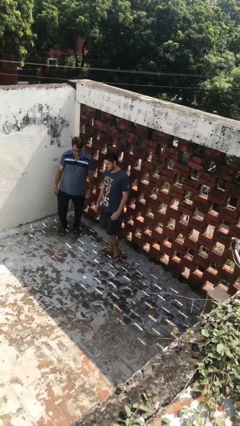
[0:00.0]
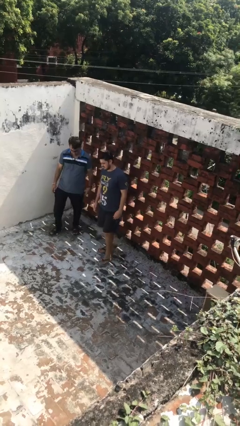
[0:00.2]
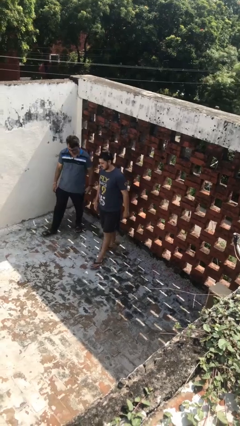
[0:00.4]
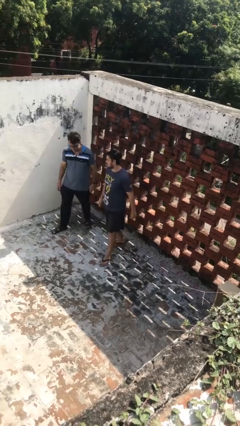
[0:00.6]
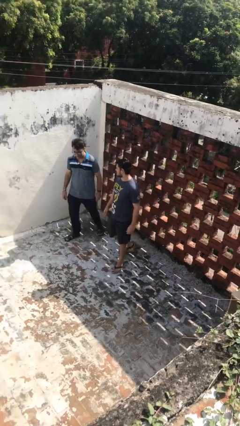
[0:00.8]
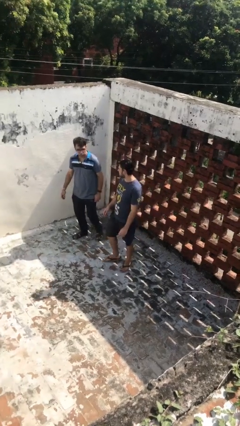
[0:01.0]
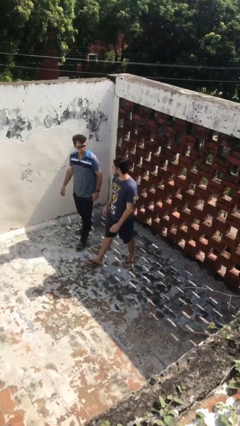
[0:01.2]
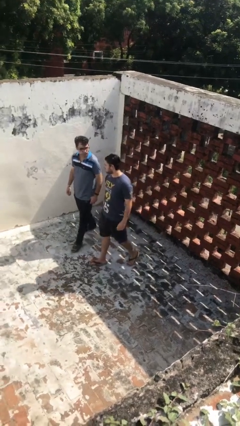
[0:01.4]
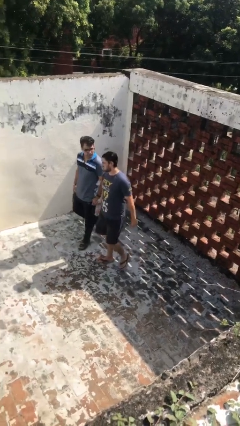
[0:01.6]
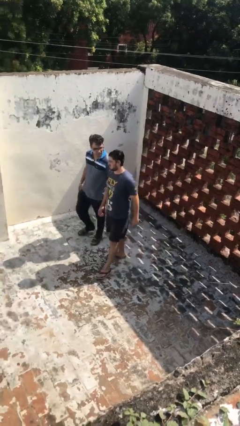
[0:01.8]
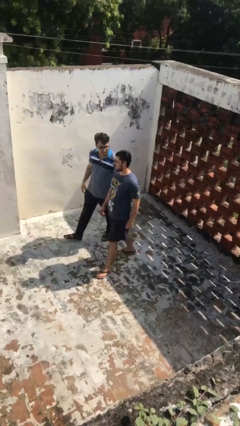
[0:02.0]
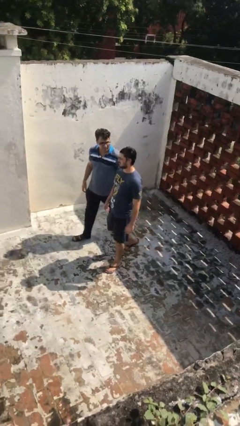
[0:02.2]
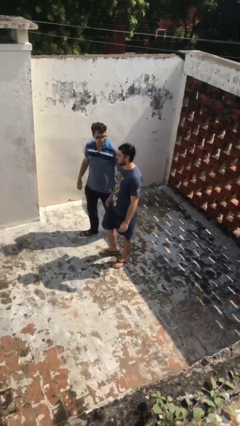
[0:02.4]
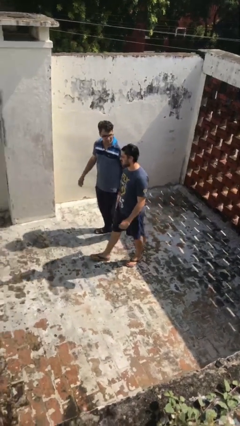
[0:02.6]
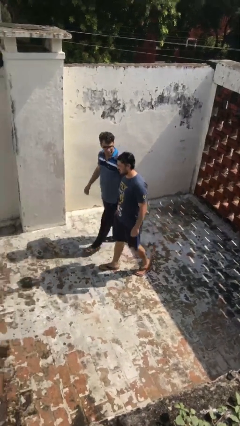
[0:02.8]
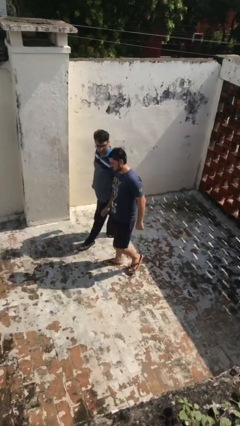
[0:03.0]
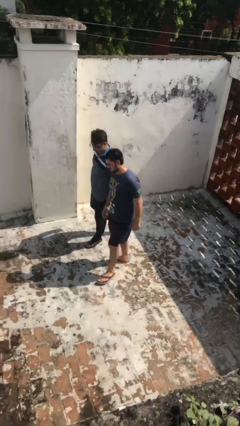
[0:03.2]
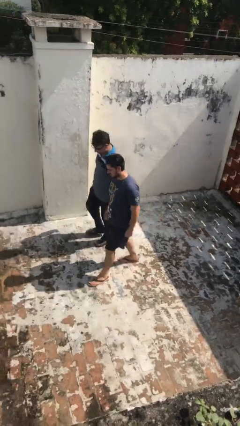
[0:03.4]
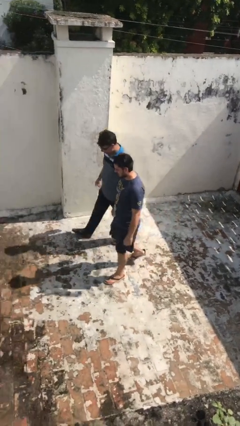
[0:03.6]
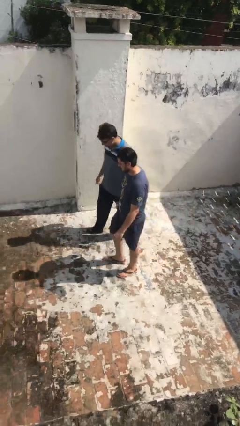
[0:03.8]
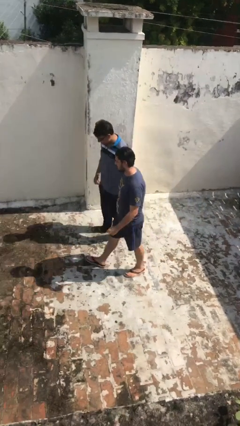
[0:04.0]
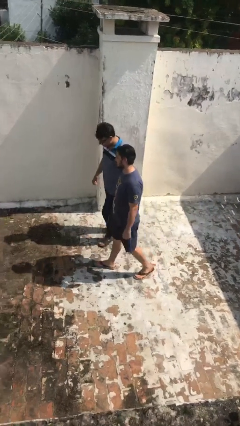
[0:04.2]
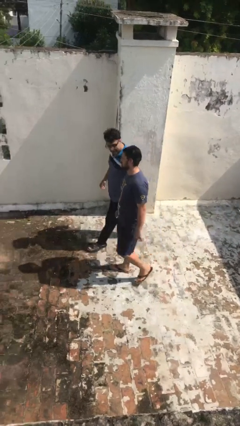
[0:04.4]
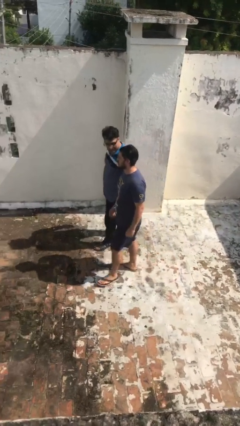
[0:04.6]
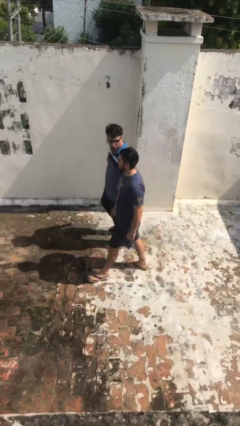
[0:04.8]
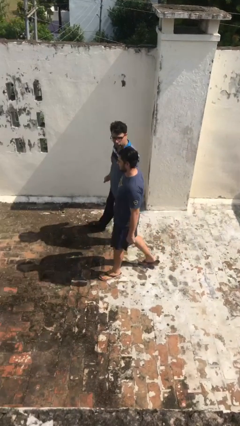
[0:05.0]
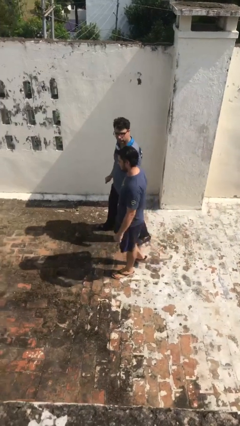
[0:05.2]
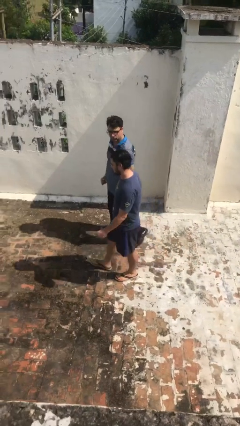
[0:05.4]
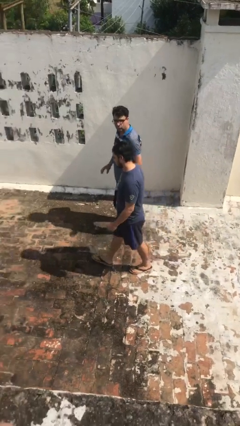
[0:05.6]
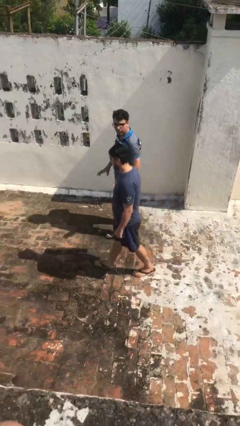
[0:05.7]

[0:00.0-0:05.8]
person talks to person

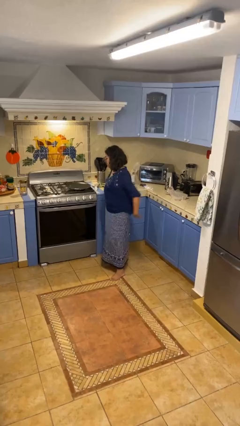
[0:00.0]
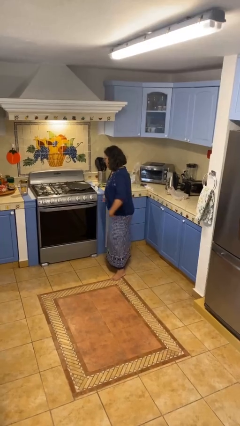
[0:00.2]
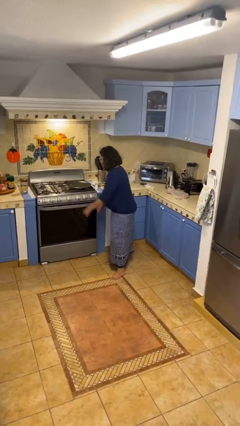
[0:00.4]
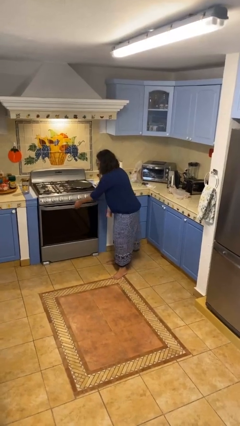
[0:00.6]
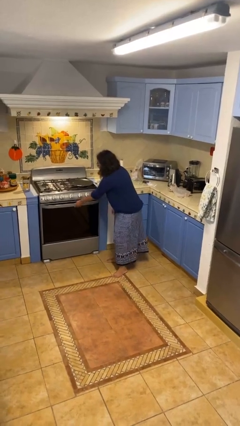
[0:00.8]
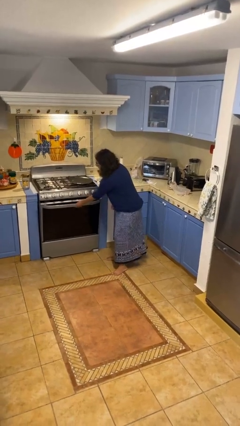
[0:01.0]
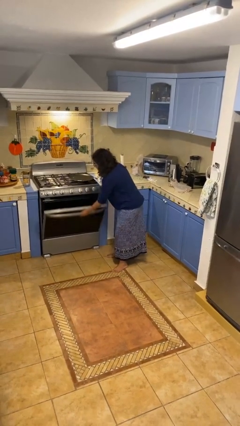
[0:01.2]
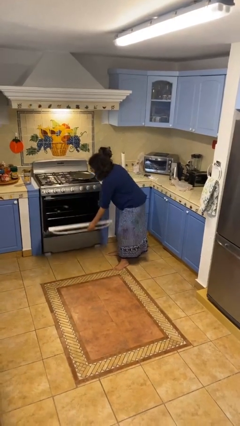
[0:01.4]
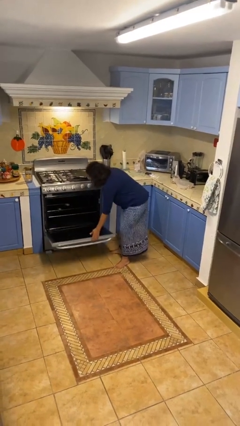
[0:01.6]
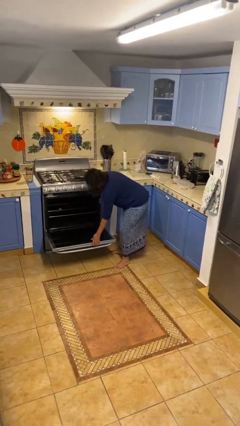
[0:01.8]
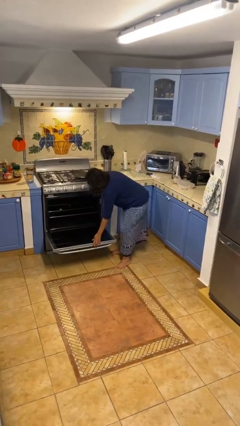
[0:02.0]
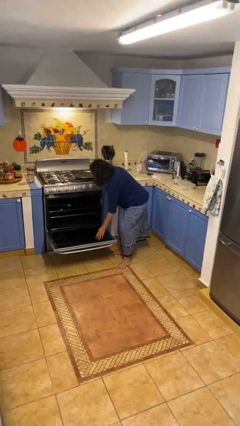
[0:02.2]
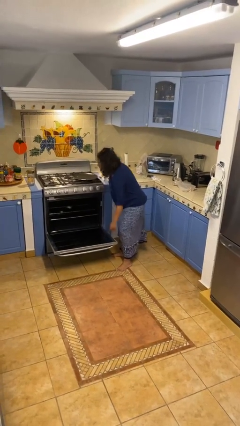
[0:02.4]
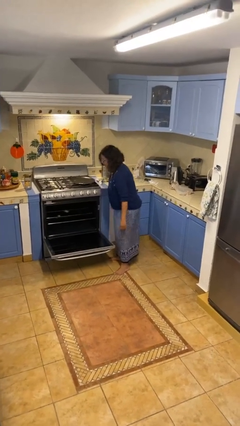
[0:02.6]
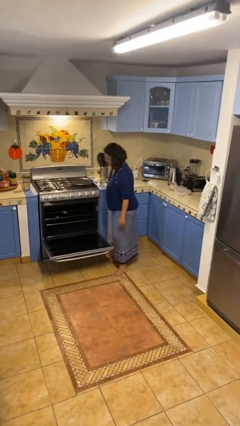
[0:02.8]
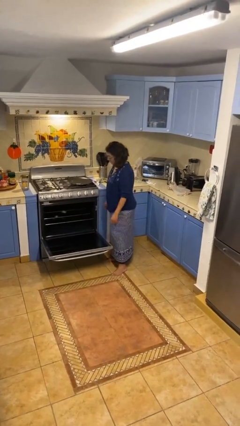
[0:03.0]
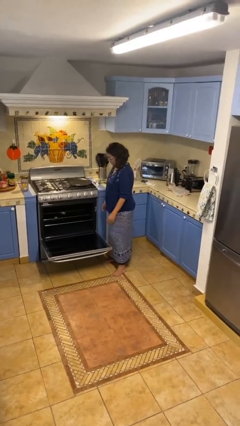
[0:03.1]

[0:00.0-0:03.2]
person opens oven door

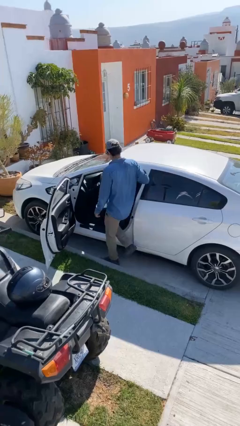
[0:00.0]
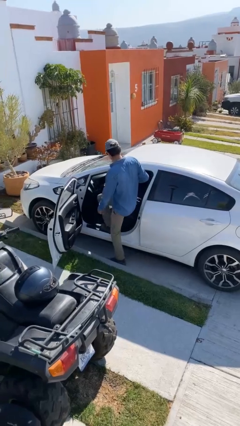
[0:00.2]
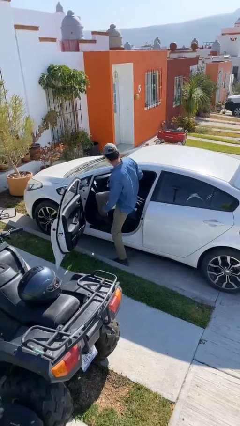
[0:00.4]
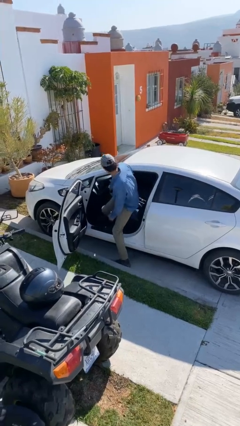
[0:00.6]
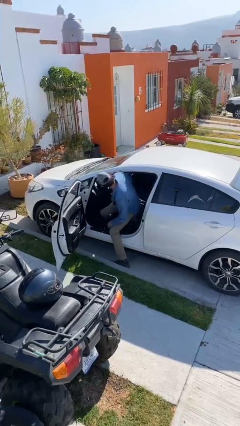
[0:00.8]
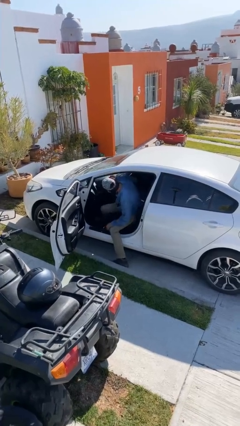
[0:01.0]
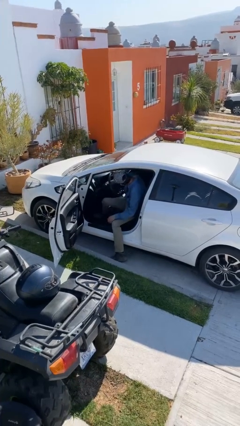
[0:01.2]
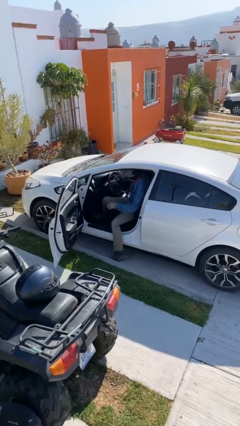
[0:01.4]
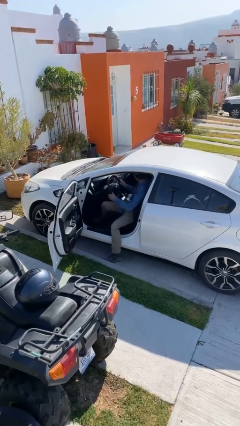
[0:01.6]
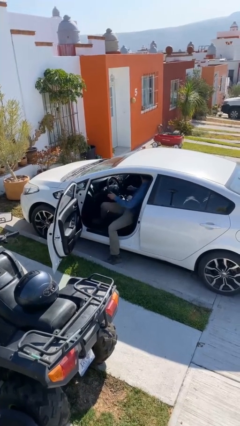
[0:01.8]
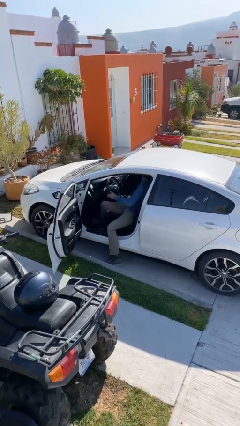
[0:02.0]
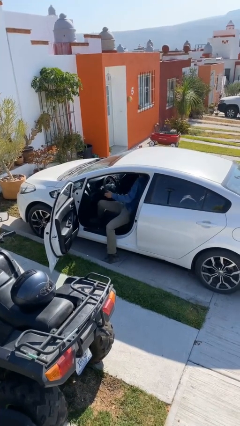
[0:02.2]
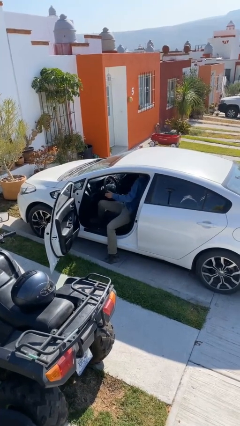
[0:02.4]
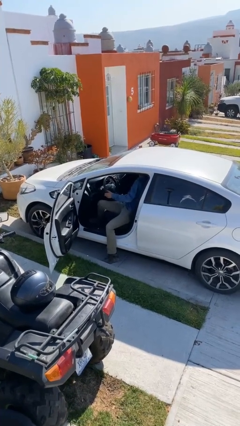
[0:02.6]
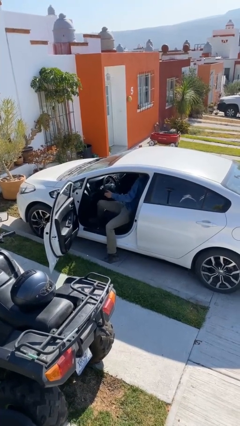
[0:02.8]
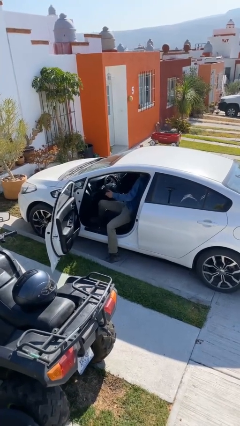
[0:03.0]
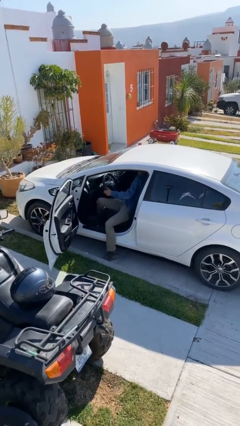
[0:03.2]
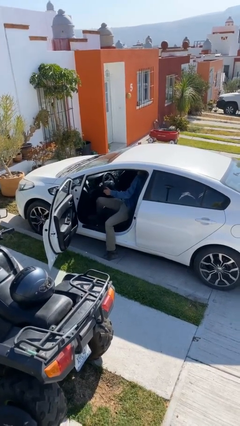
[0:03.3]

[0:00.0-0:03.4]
person enters car

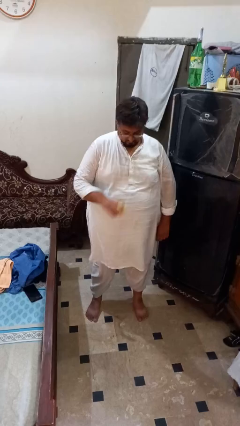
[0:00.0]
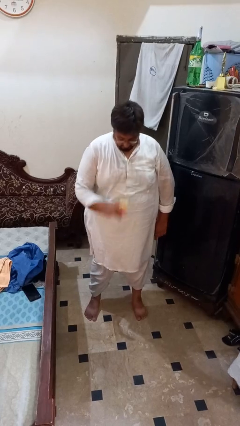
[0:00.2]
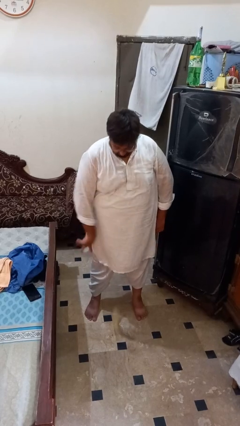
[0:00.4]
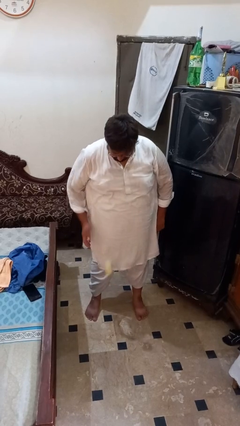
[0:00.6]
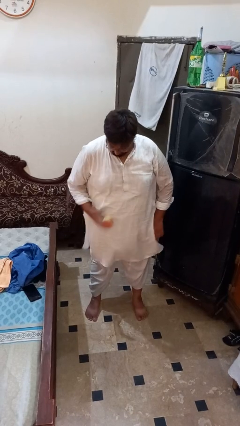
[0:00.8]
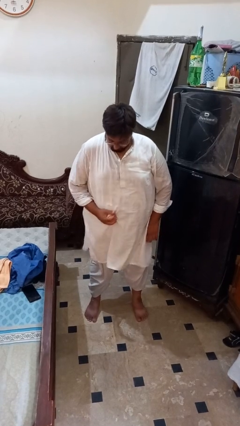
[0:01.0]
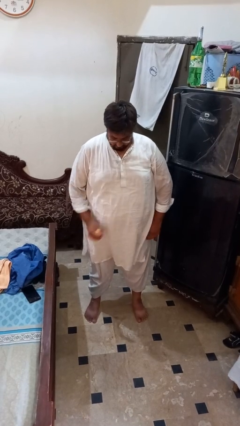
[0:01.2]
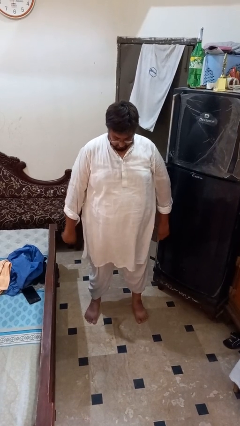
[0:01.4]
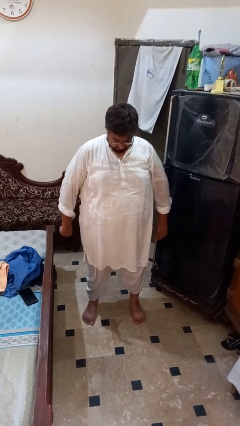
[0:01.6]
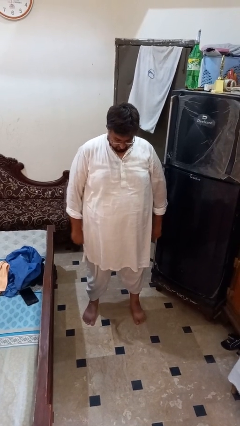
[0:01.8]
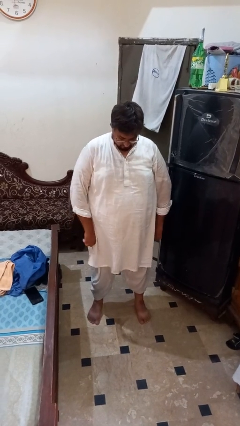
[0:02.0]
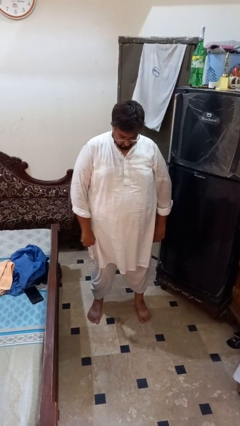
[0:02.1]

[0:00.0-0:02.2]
person bounces ball on floor

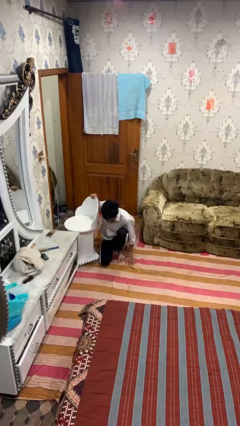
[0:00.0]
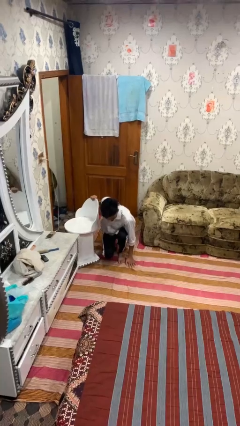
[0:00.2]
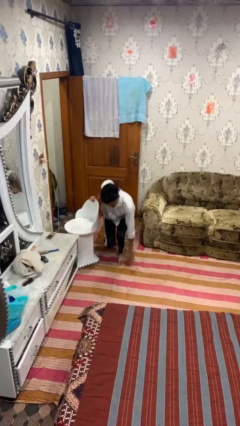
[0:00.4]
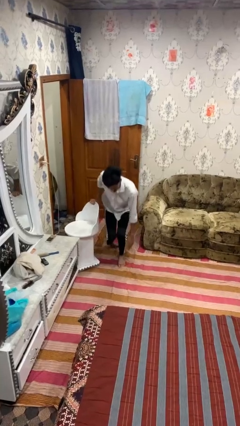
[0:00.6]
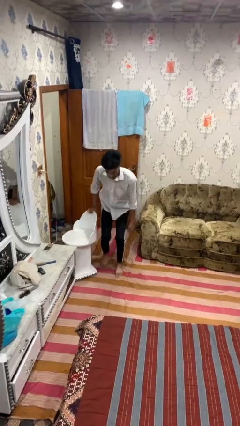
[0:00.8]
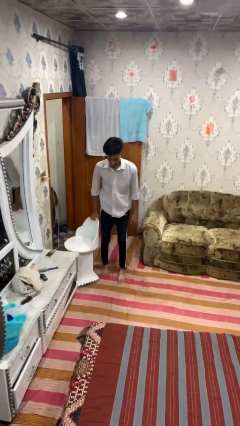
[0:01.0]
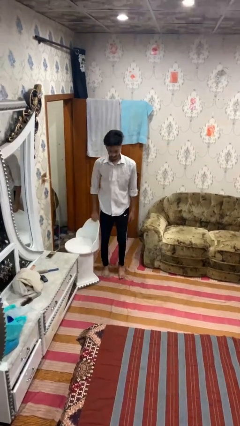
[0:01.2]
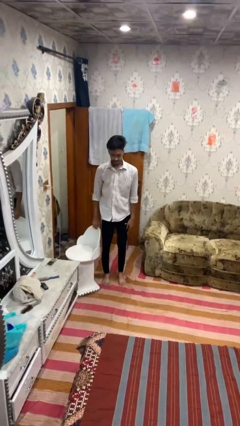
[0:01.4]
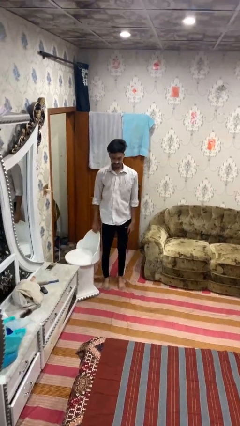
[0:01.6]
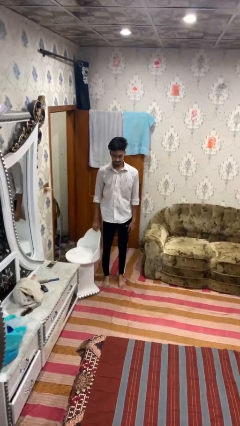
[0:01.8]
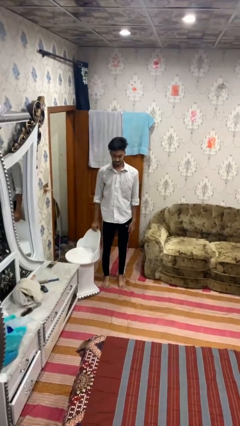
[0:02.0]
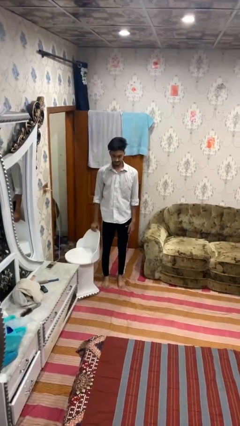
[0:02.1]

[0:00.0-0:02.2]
person stands up from floor

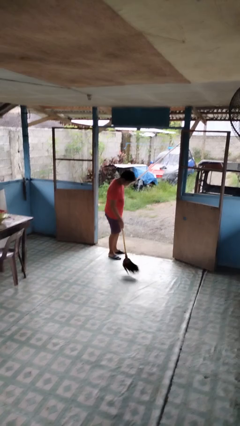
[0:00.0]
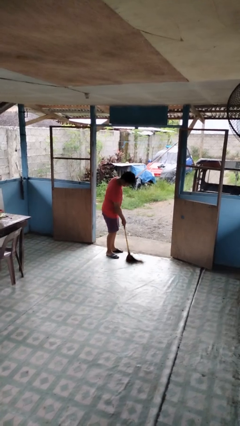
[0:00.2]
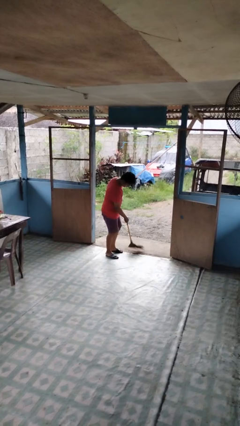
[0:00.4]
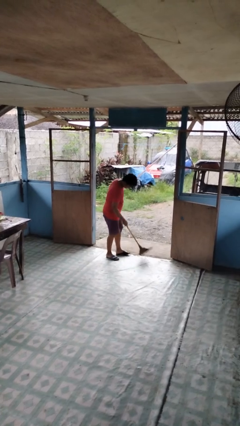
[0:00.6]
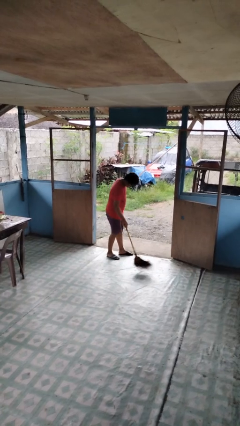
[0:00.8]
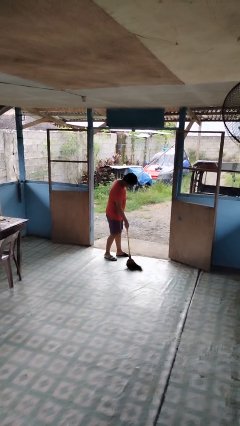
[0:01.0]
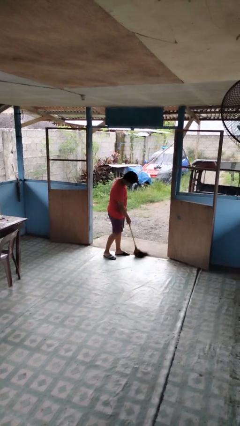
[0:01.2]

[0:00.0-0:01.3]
person sweeps floor
